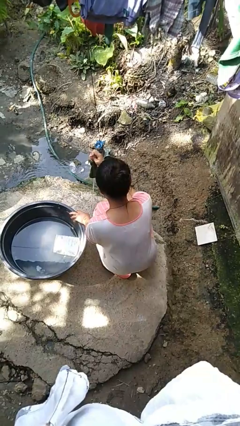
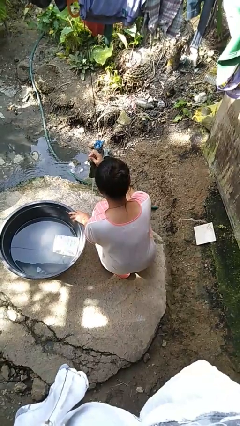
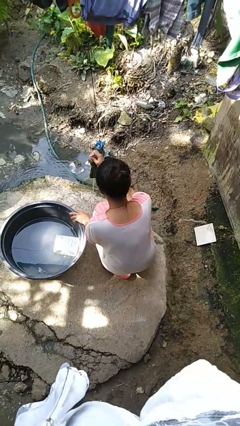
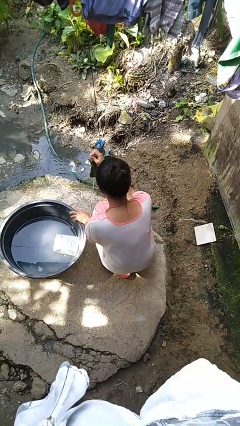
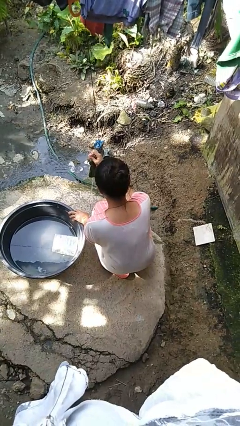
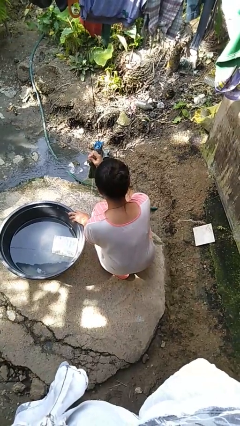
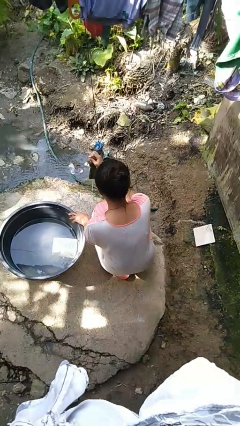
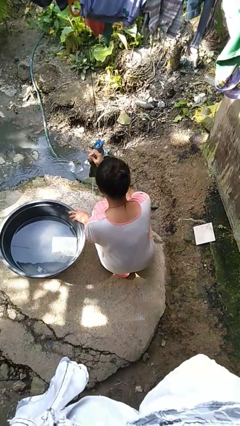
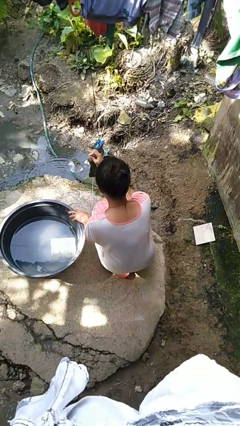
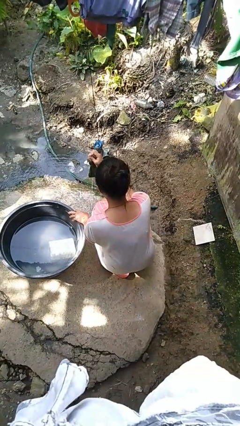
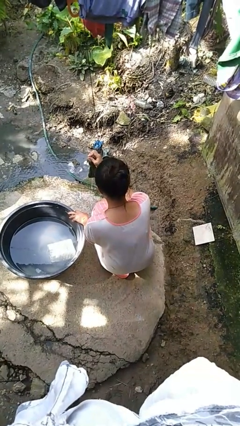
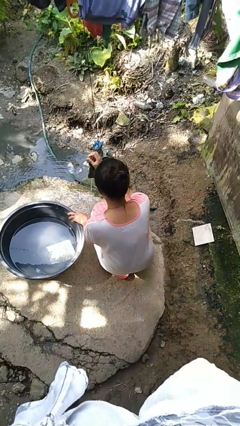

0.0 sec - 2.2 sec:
person turns off faucet

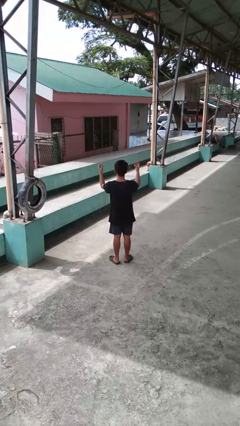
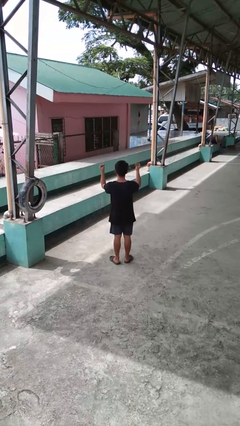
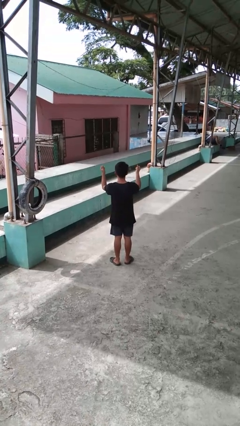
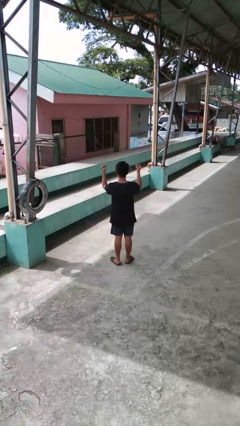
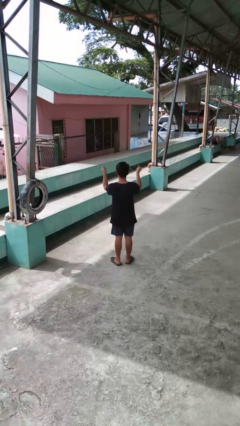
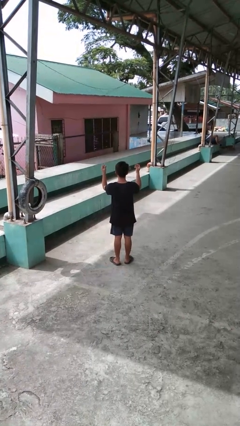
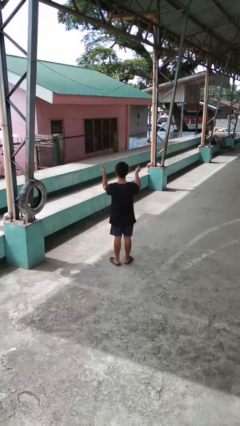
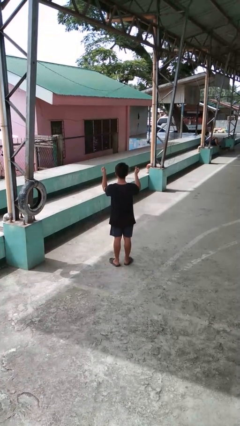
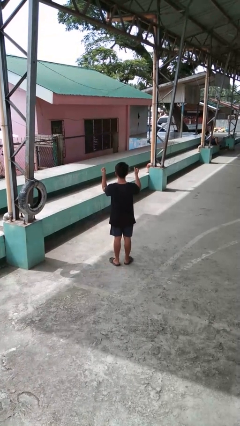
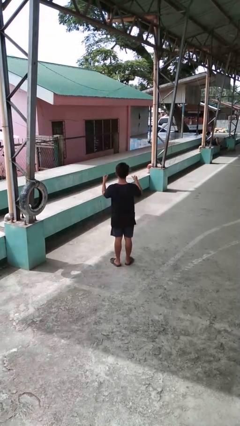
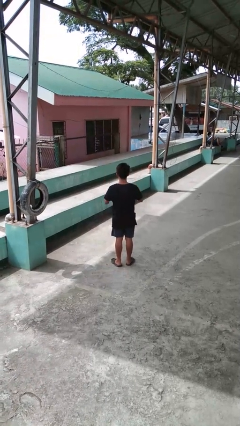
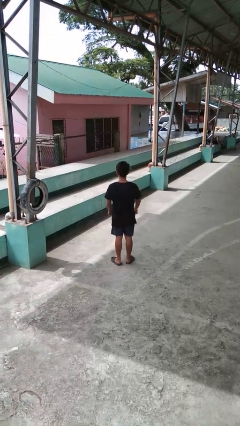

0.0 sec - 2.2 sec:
person snaps fingers

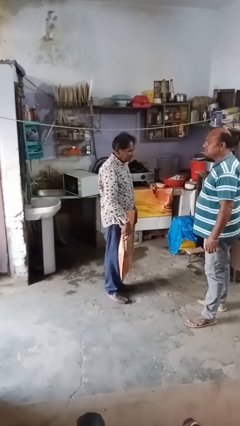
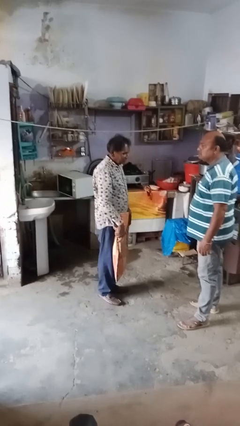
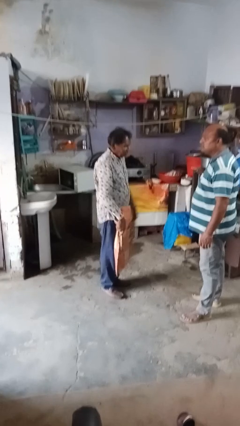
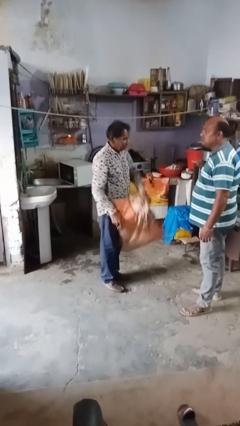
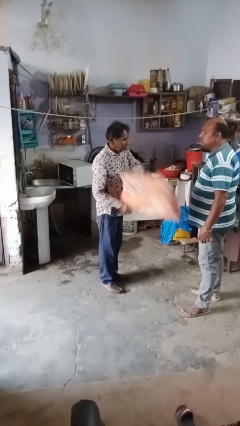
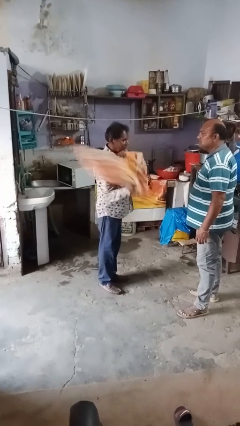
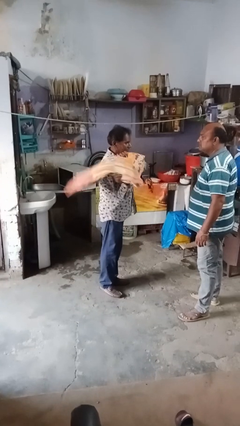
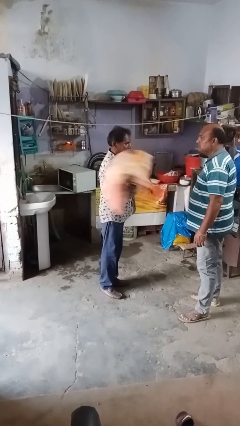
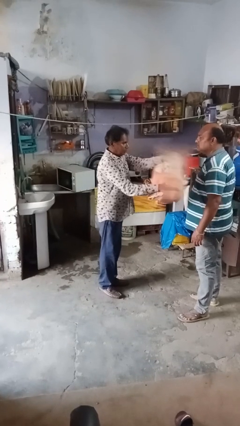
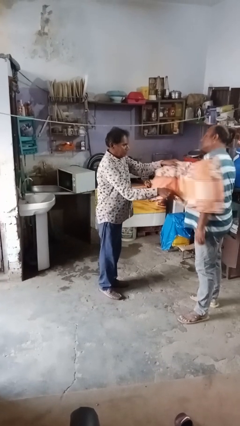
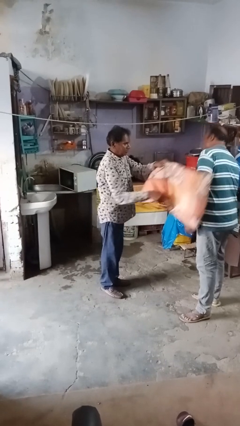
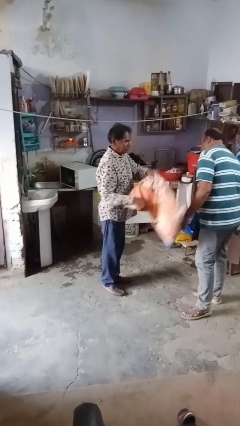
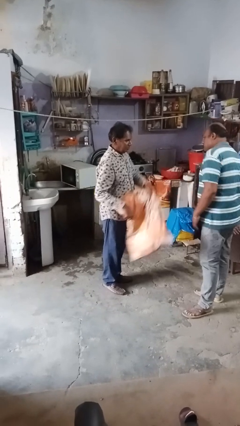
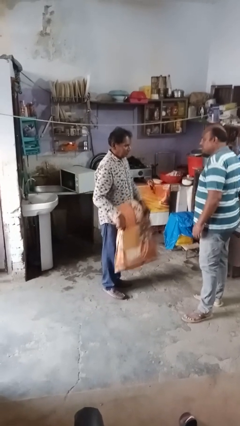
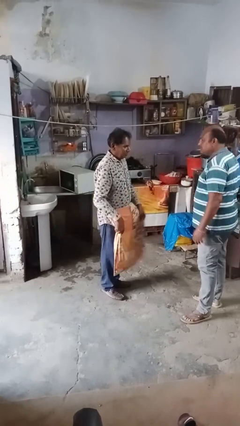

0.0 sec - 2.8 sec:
person hits person with pillow

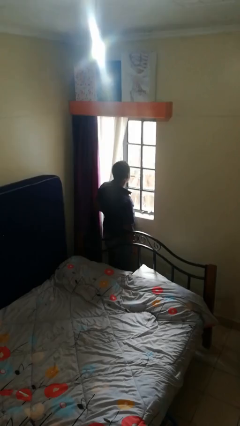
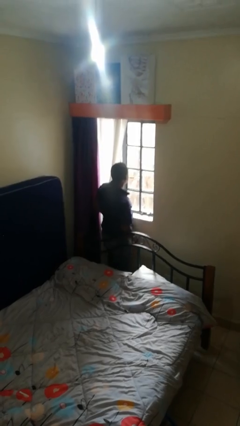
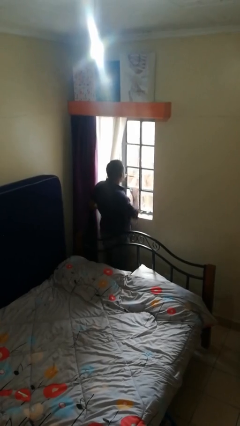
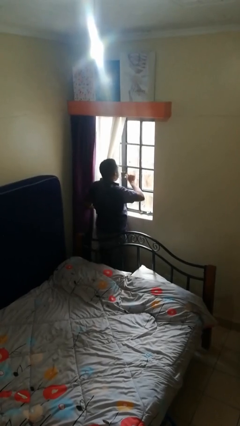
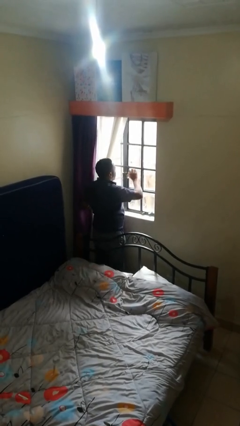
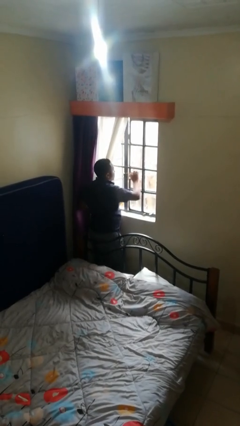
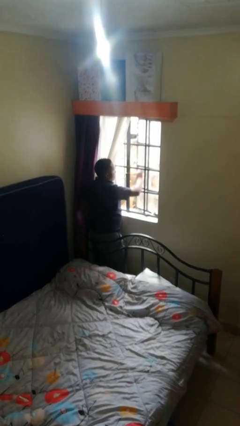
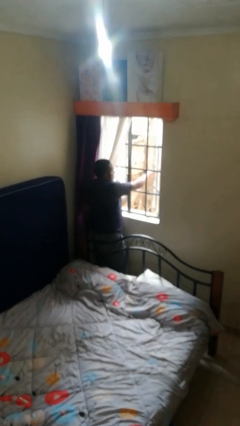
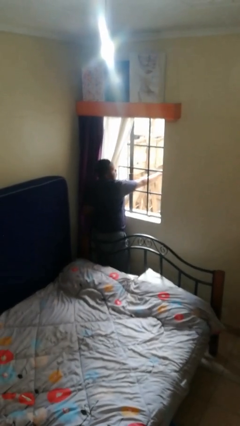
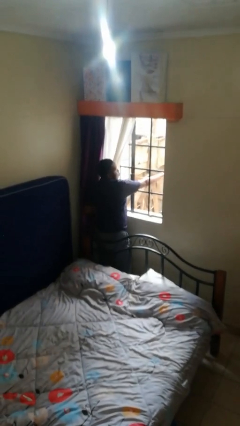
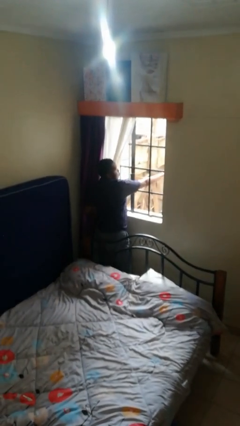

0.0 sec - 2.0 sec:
person opens home window

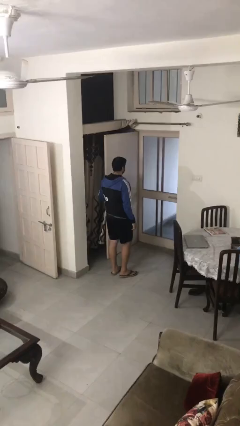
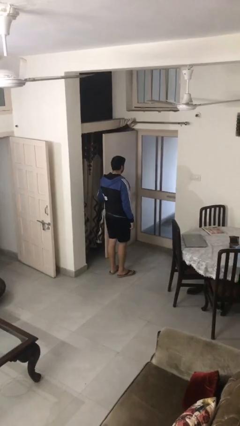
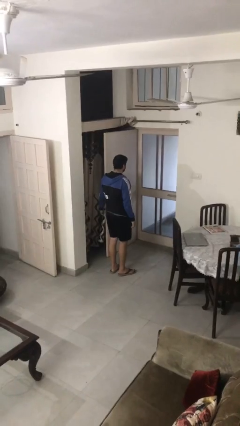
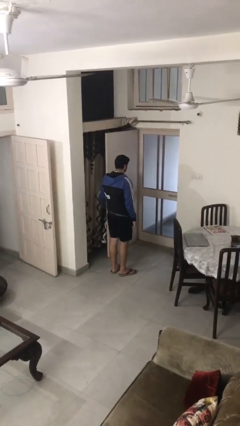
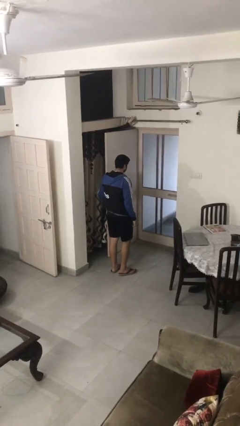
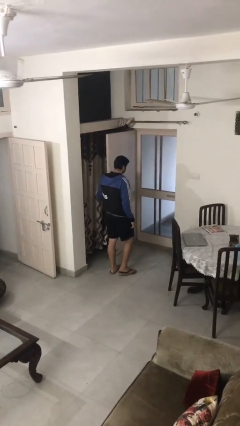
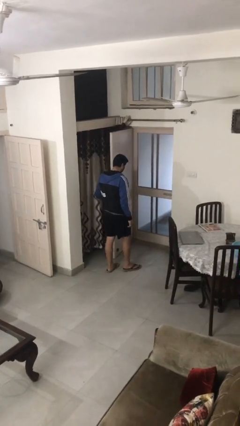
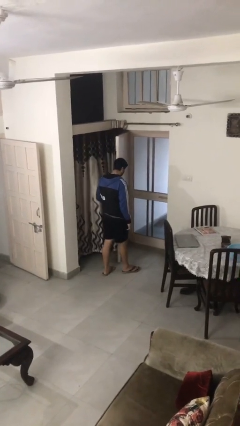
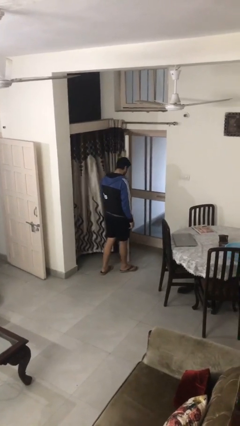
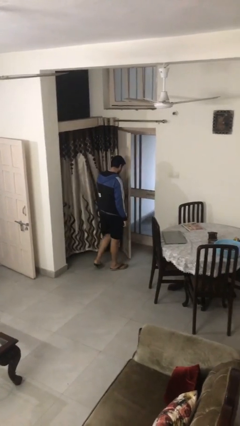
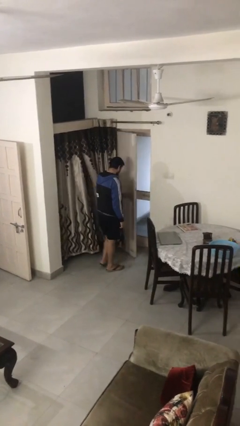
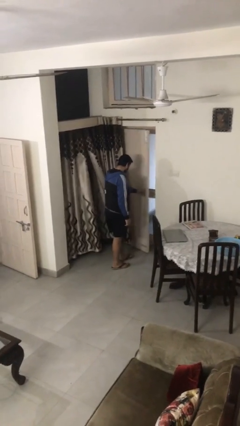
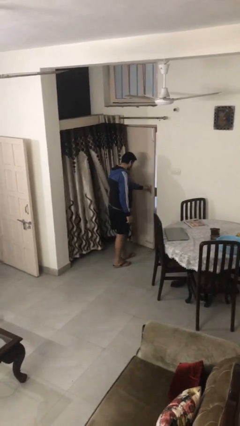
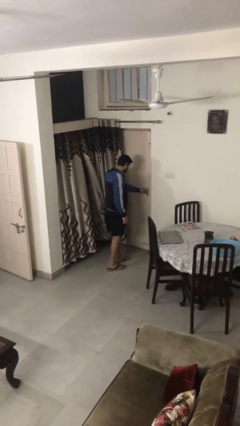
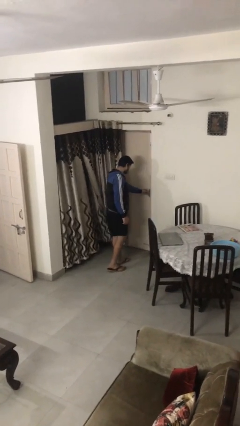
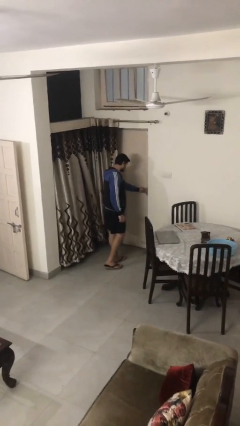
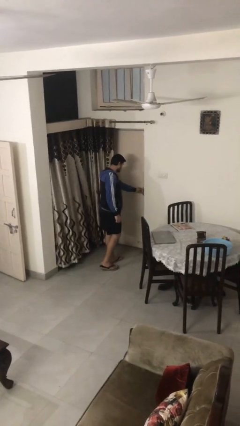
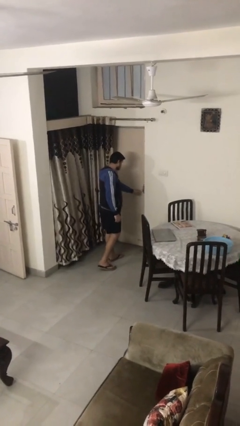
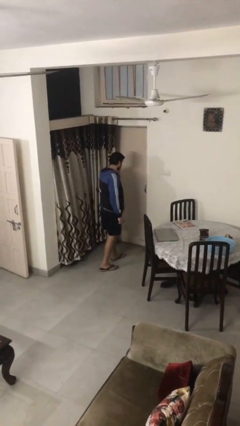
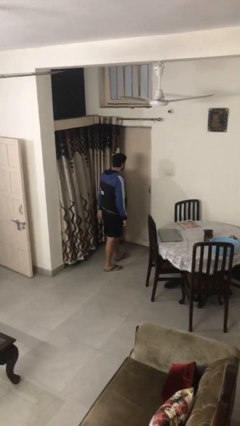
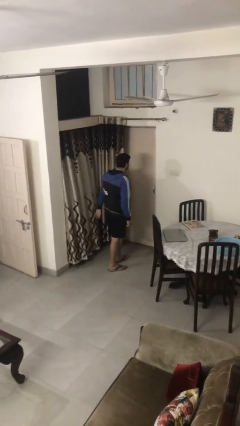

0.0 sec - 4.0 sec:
person closes facility door

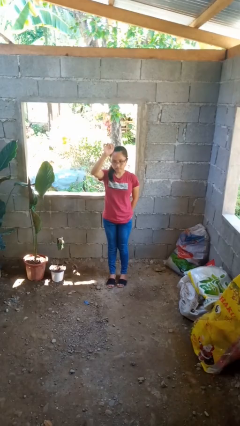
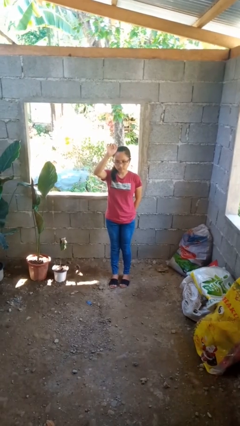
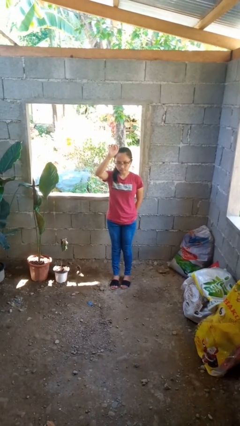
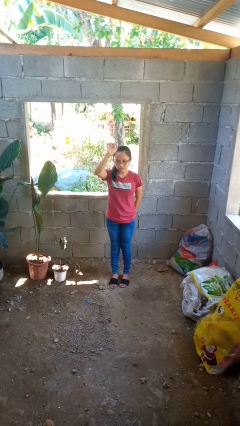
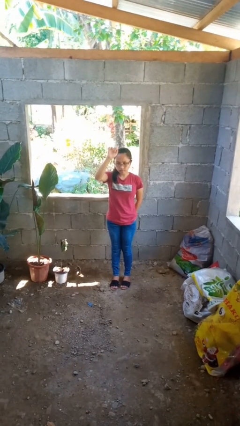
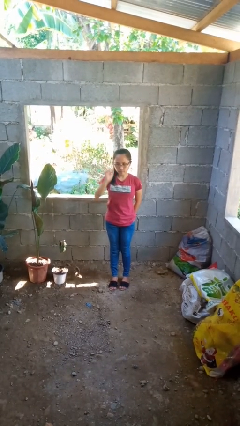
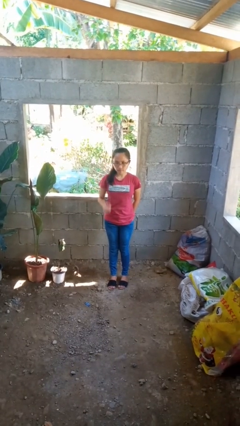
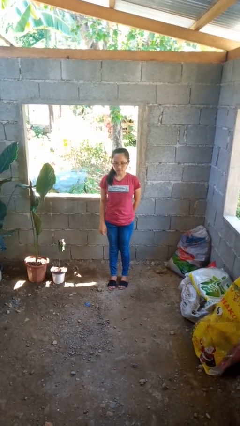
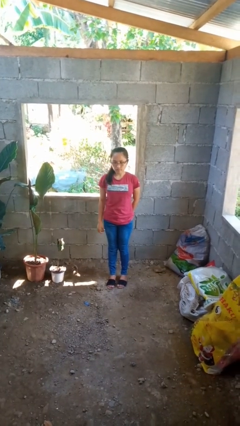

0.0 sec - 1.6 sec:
person gestures lower hand

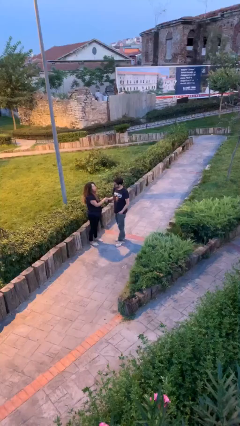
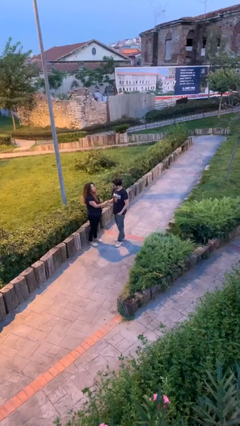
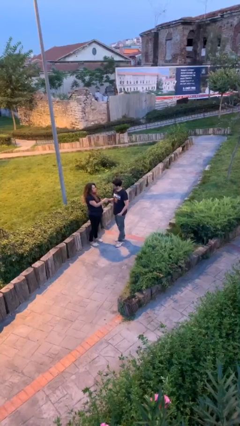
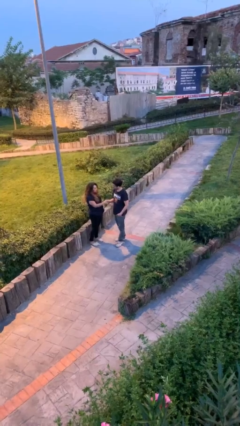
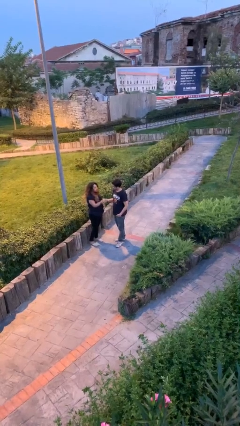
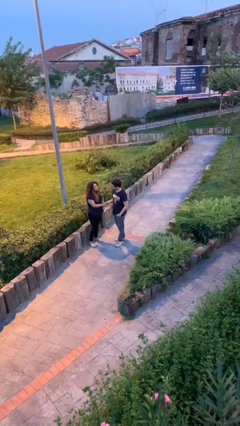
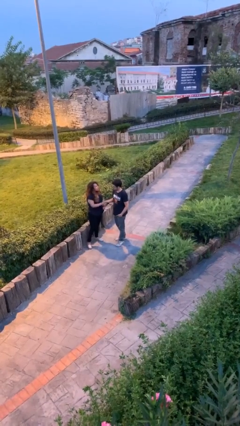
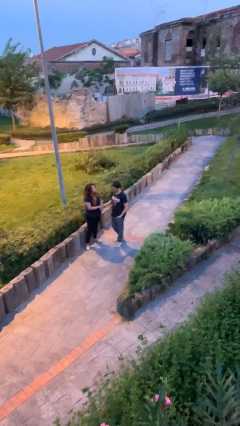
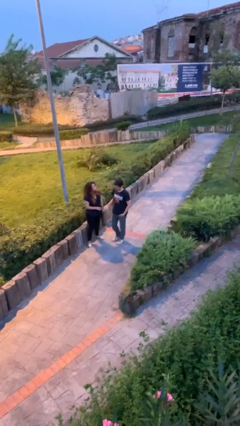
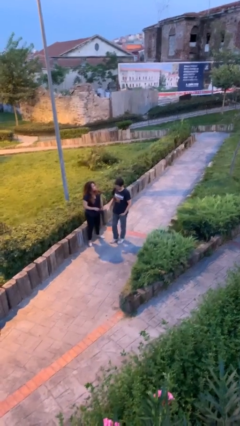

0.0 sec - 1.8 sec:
person shakes hand

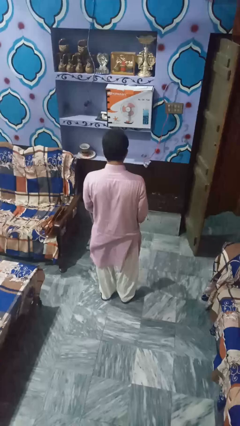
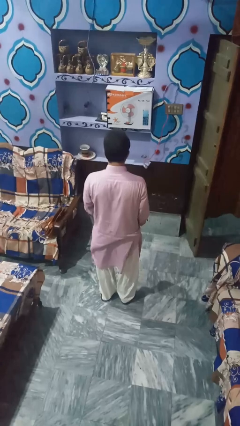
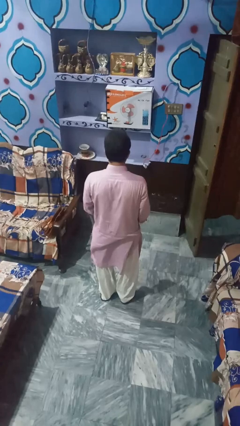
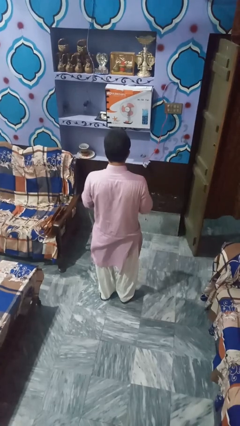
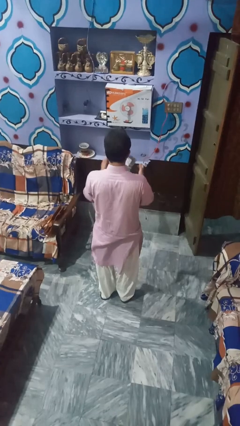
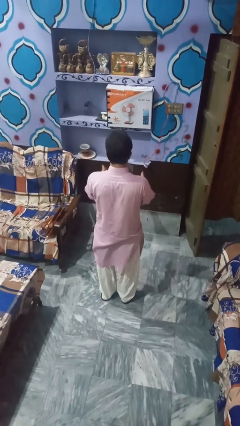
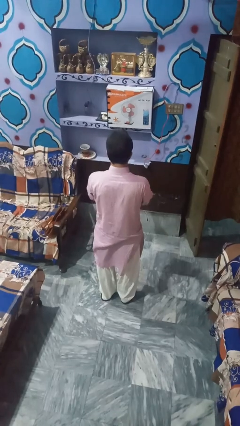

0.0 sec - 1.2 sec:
person drops object
